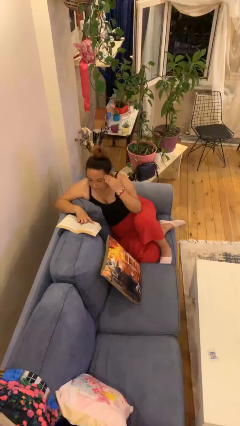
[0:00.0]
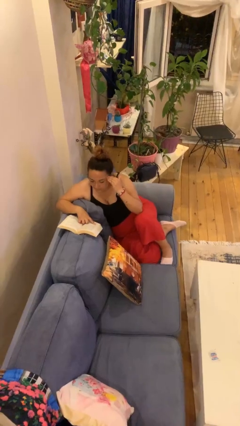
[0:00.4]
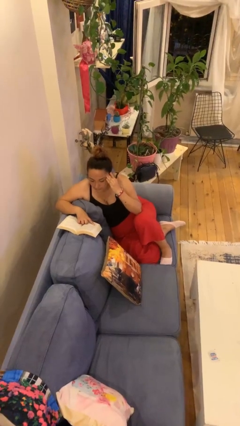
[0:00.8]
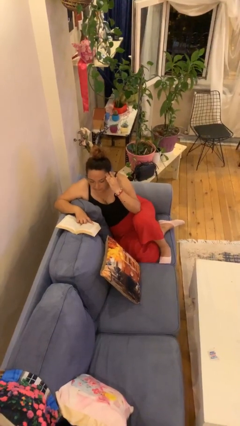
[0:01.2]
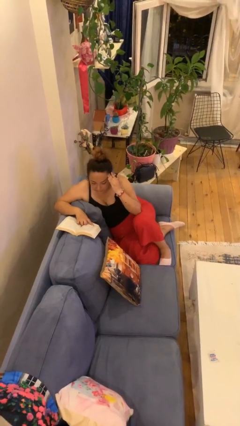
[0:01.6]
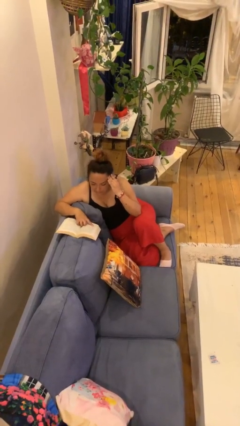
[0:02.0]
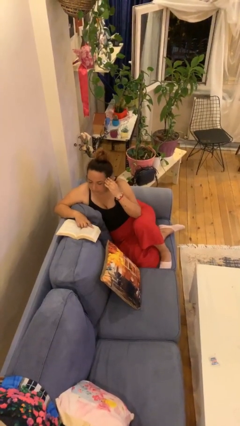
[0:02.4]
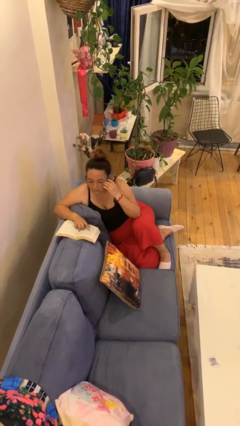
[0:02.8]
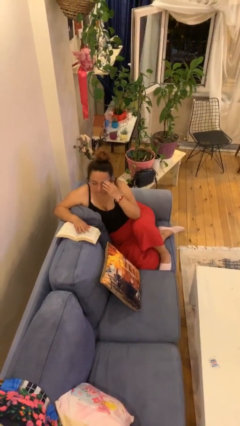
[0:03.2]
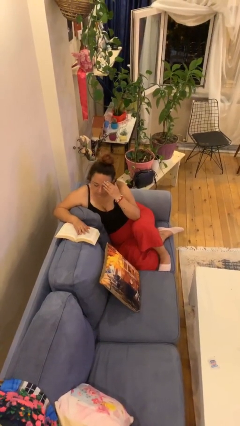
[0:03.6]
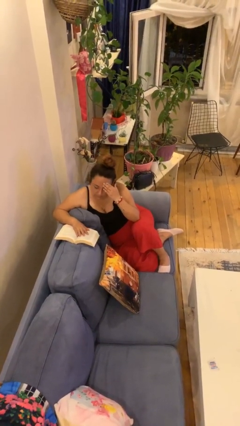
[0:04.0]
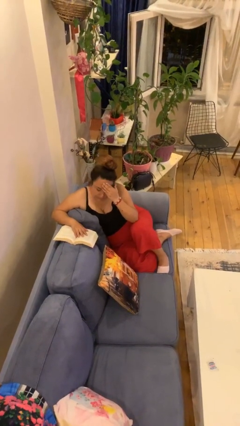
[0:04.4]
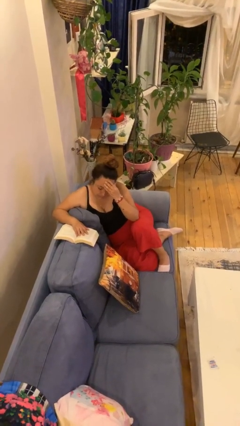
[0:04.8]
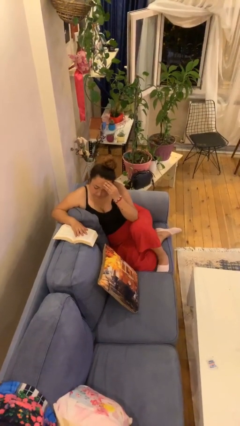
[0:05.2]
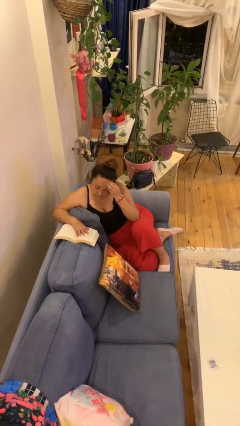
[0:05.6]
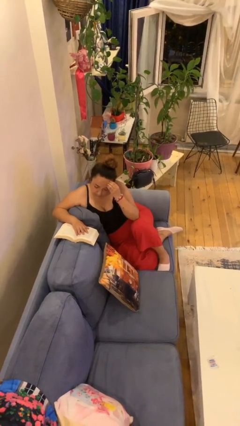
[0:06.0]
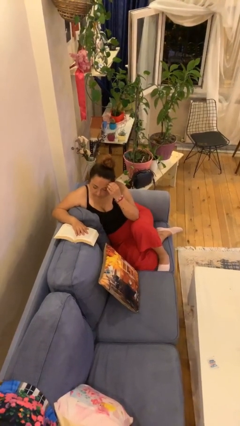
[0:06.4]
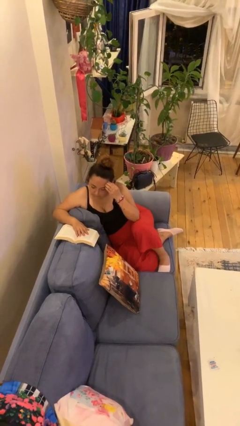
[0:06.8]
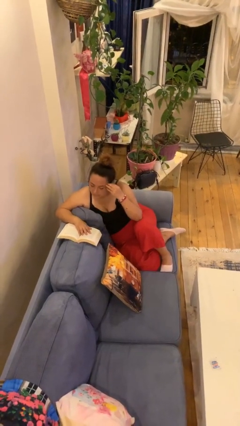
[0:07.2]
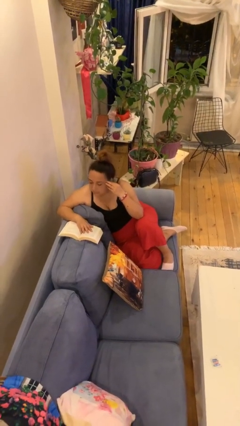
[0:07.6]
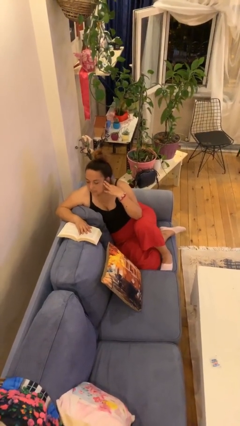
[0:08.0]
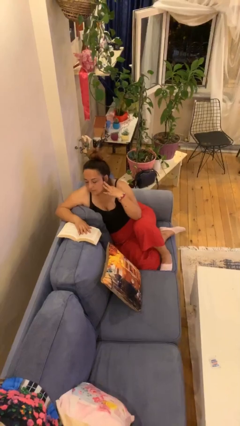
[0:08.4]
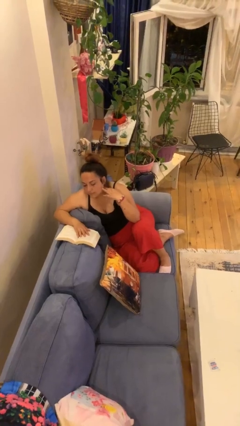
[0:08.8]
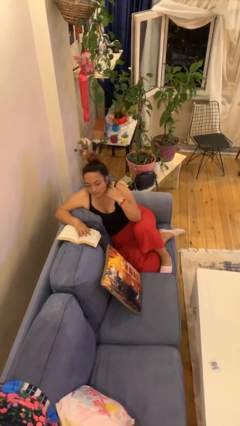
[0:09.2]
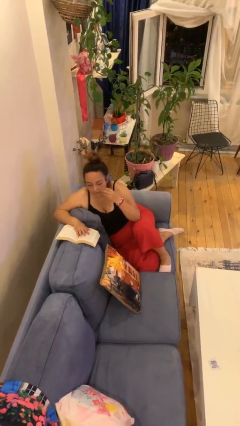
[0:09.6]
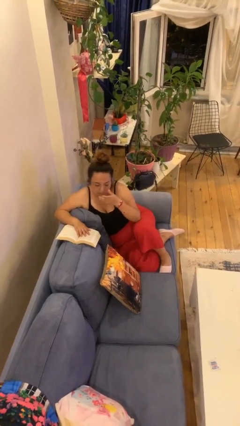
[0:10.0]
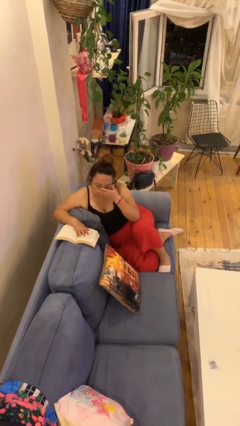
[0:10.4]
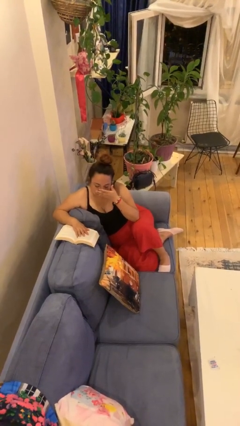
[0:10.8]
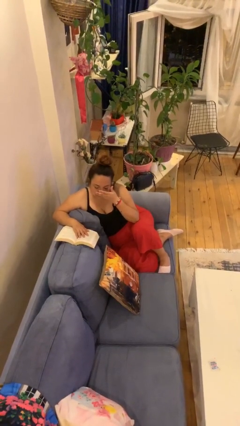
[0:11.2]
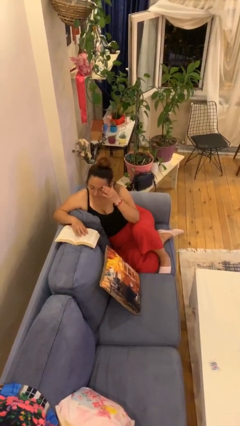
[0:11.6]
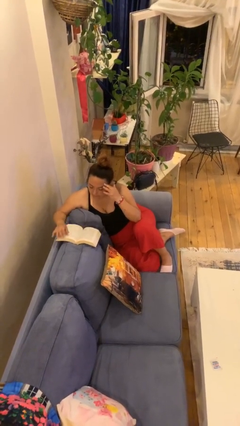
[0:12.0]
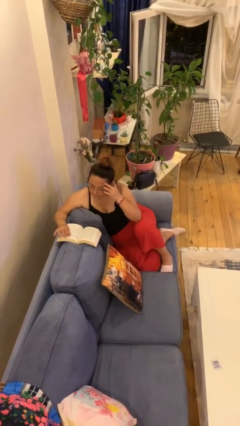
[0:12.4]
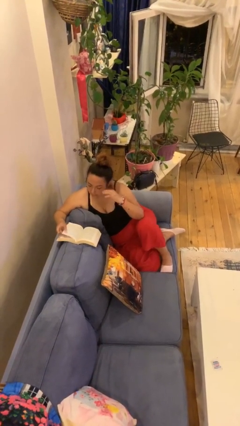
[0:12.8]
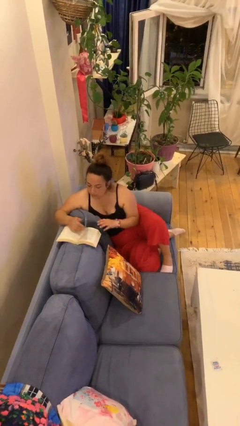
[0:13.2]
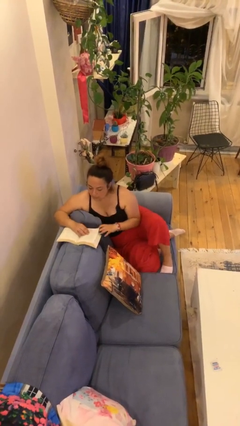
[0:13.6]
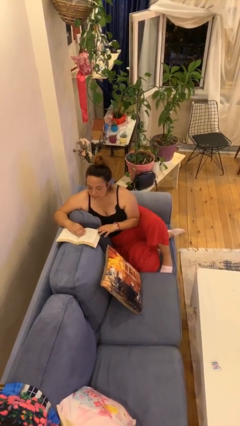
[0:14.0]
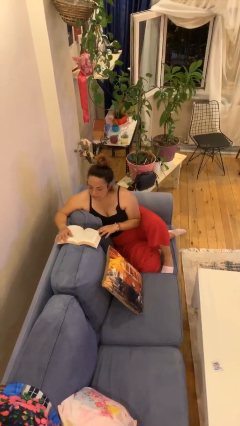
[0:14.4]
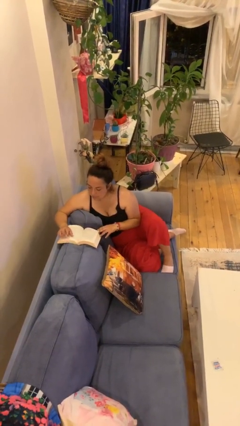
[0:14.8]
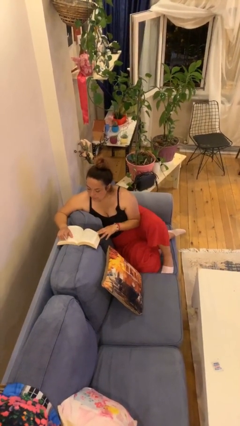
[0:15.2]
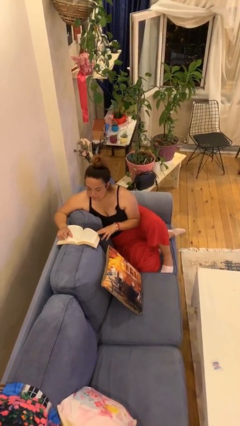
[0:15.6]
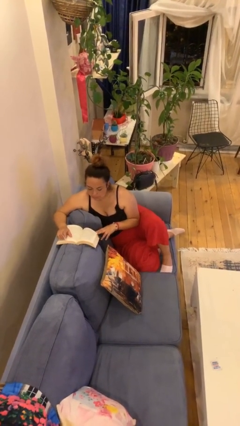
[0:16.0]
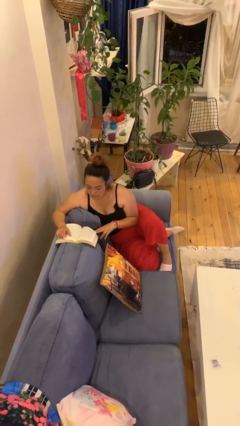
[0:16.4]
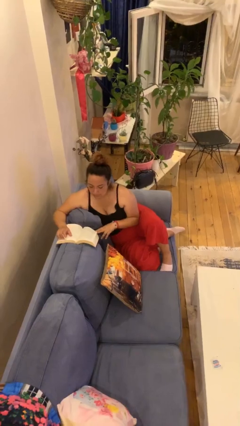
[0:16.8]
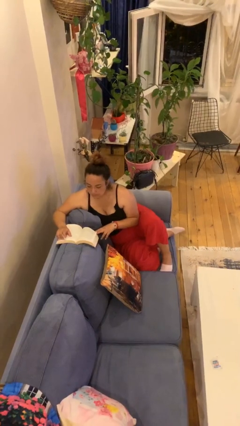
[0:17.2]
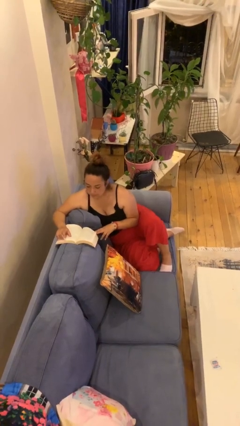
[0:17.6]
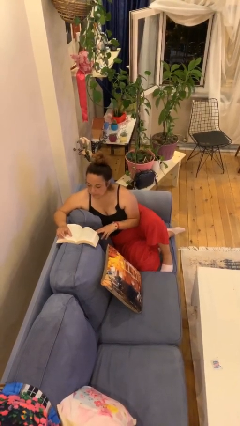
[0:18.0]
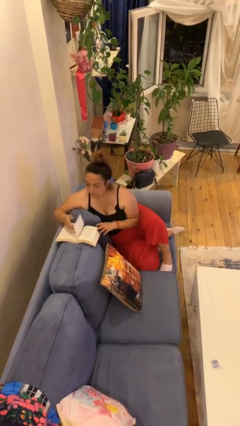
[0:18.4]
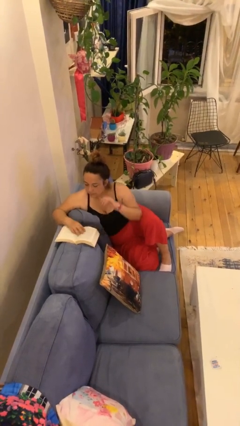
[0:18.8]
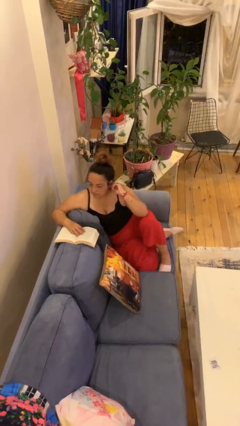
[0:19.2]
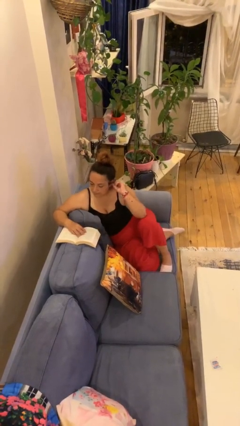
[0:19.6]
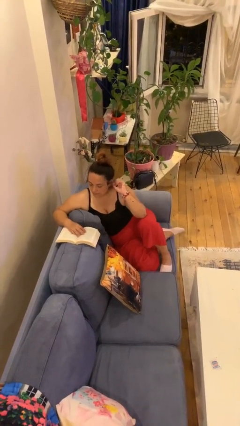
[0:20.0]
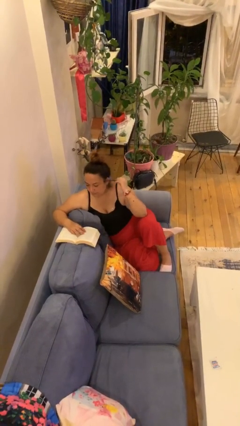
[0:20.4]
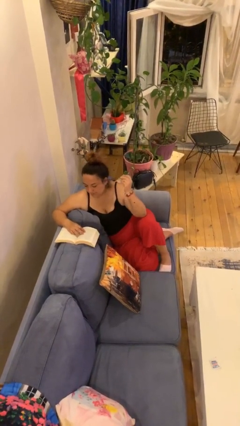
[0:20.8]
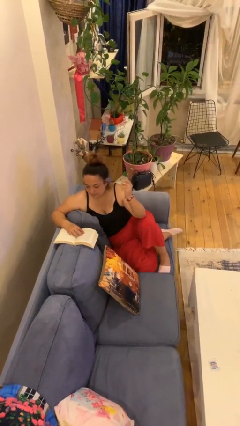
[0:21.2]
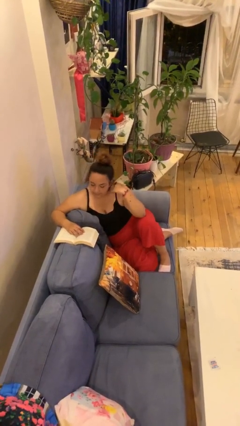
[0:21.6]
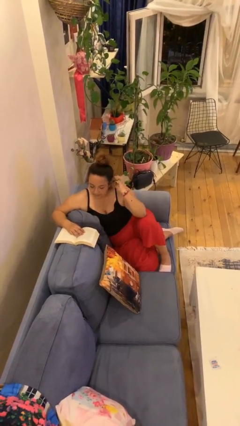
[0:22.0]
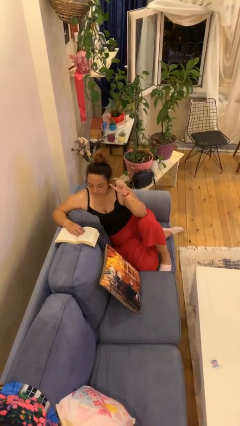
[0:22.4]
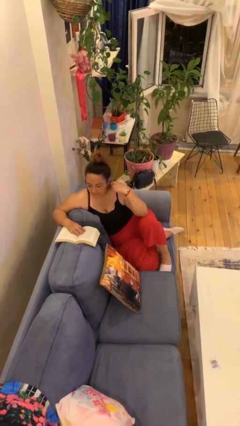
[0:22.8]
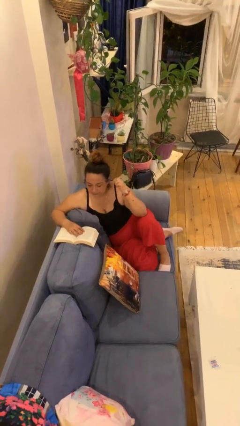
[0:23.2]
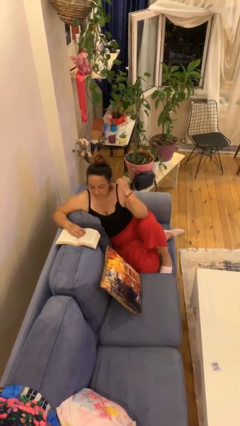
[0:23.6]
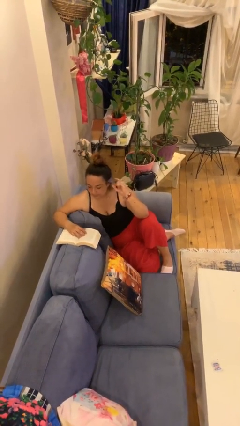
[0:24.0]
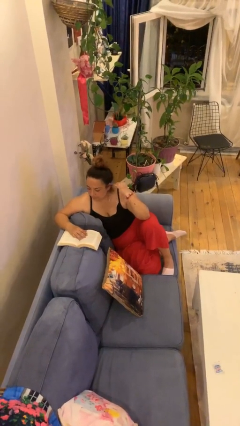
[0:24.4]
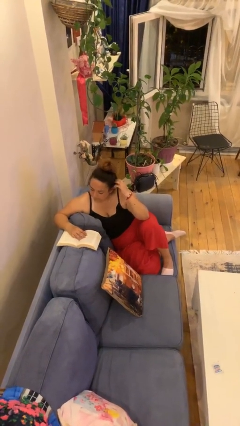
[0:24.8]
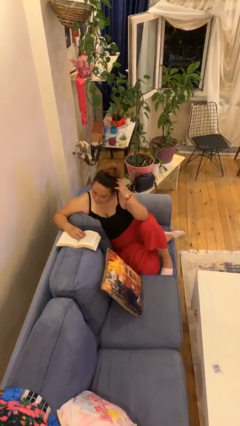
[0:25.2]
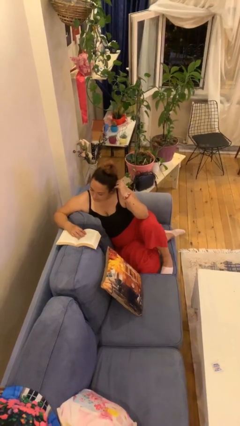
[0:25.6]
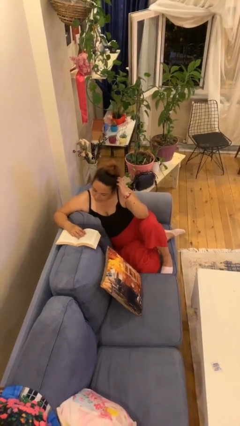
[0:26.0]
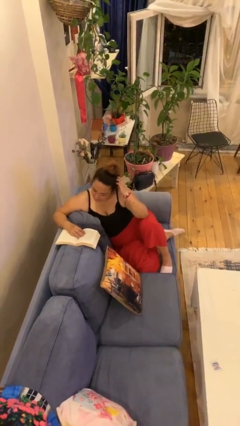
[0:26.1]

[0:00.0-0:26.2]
person reads document

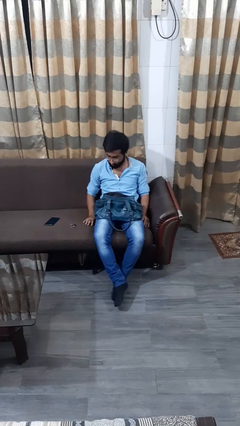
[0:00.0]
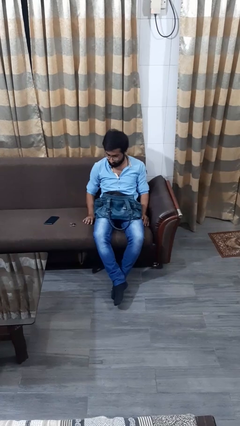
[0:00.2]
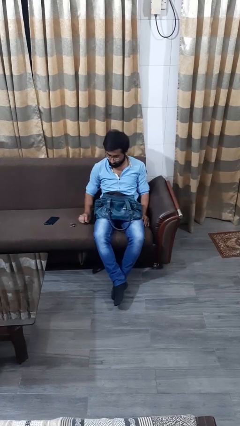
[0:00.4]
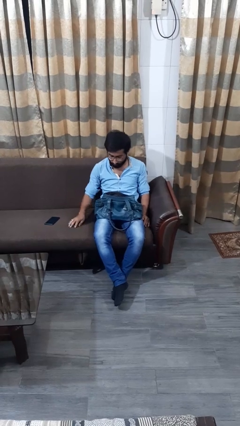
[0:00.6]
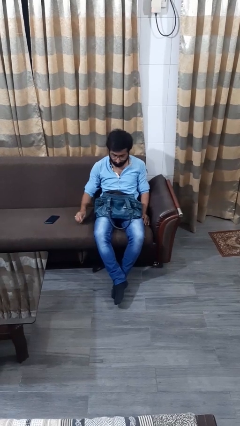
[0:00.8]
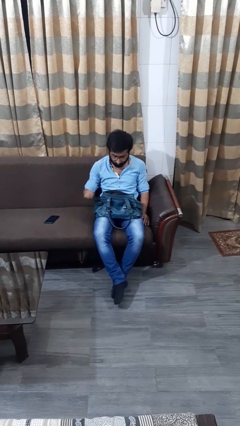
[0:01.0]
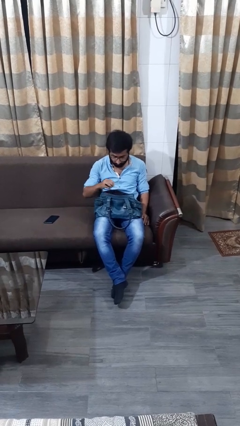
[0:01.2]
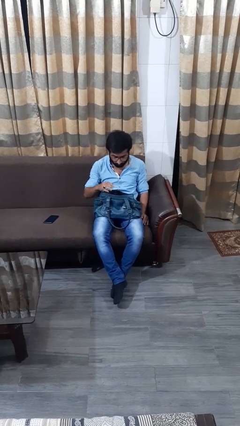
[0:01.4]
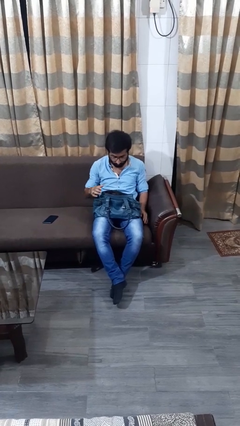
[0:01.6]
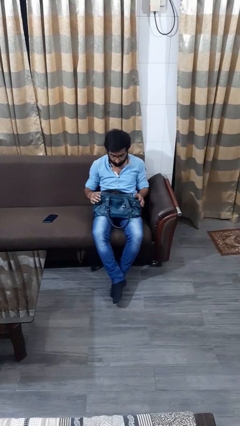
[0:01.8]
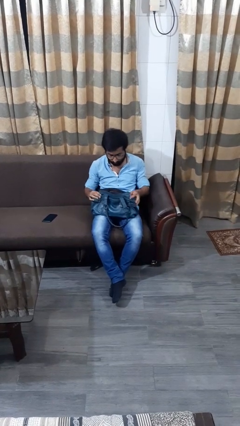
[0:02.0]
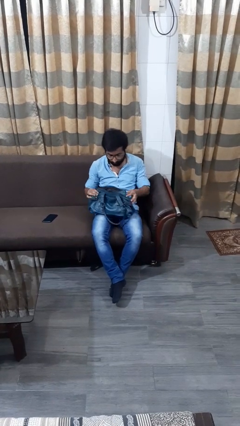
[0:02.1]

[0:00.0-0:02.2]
person puts object into purse

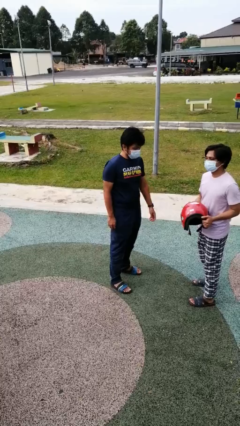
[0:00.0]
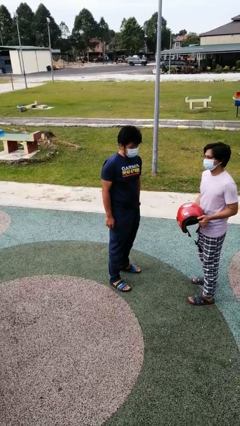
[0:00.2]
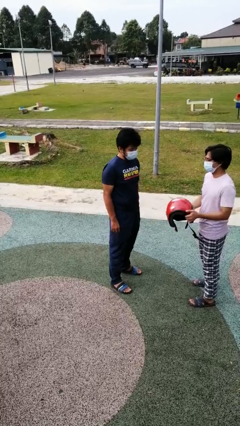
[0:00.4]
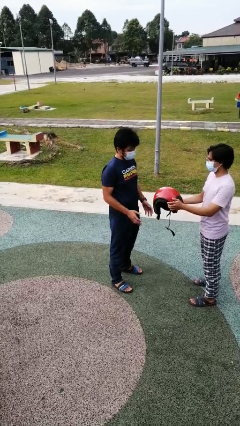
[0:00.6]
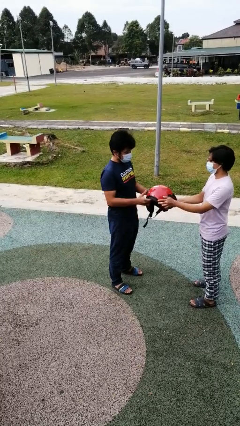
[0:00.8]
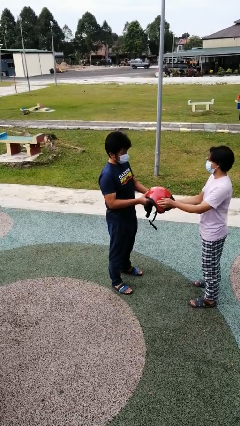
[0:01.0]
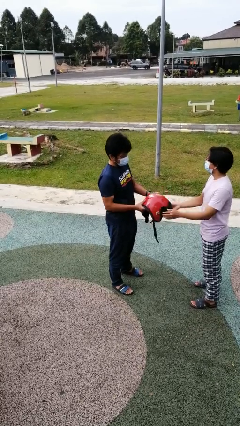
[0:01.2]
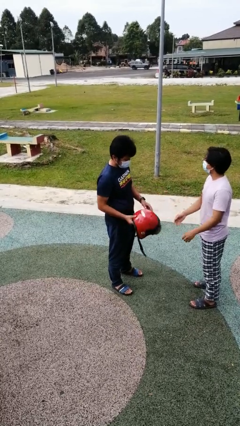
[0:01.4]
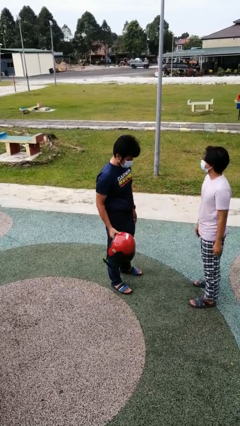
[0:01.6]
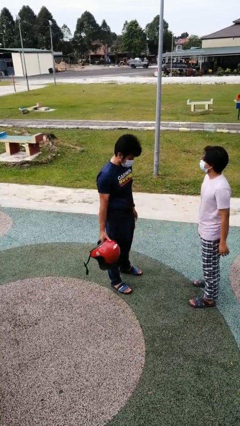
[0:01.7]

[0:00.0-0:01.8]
person transfers object to person

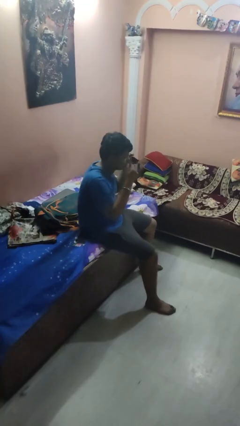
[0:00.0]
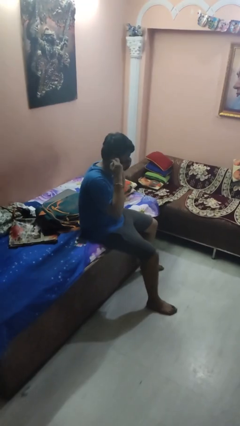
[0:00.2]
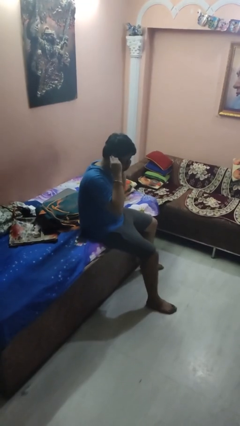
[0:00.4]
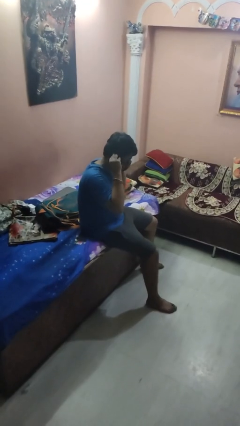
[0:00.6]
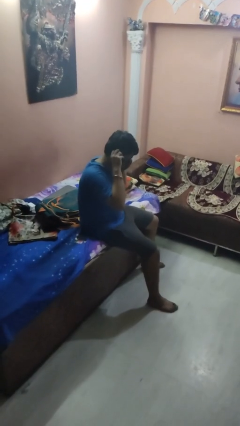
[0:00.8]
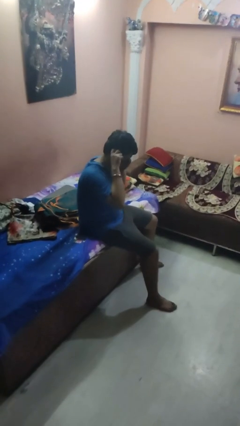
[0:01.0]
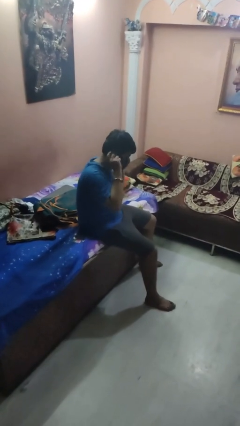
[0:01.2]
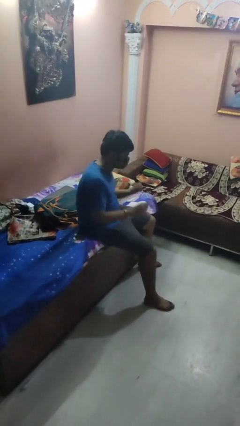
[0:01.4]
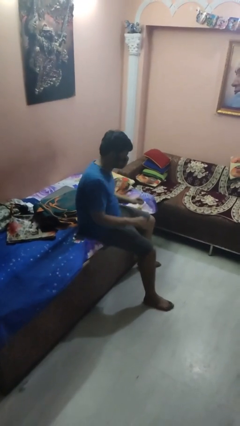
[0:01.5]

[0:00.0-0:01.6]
person puts on facemask
